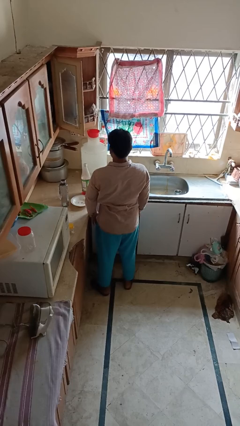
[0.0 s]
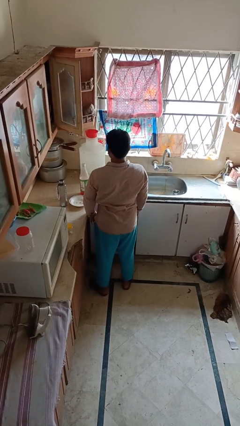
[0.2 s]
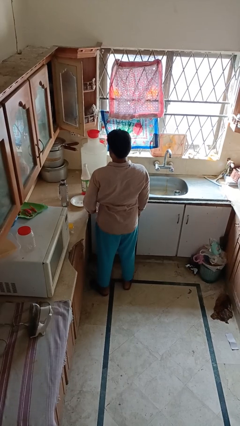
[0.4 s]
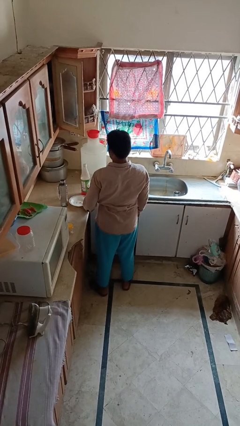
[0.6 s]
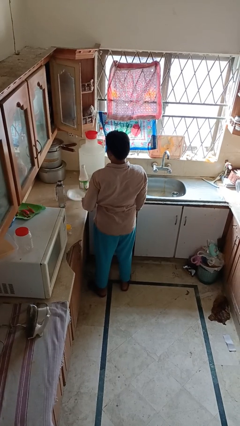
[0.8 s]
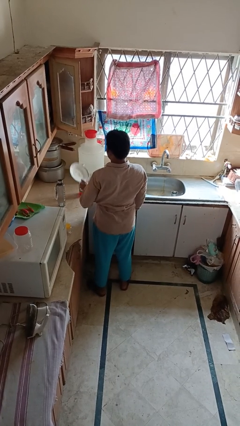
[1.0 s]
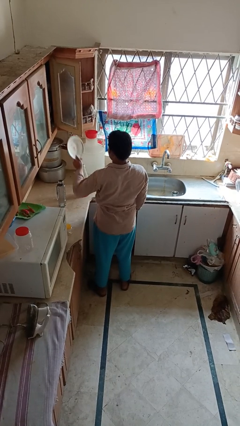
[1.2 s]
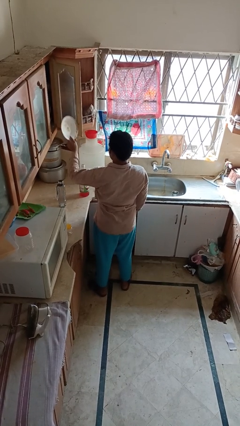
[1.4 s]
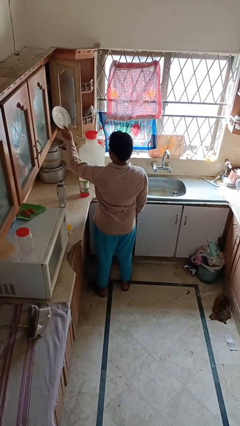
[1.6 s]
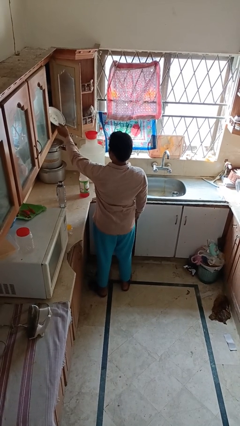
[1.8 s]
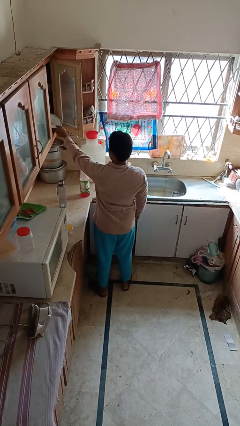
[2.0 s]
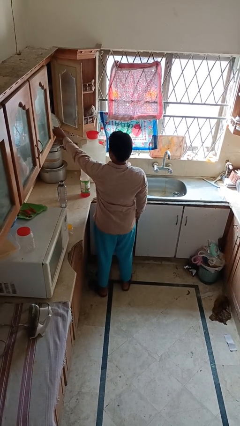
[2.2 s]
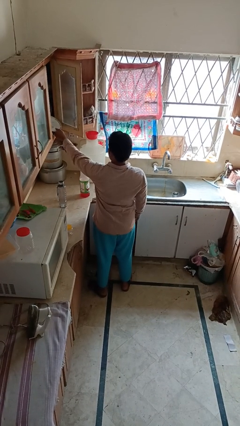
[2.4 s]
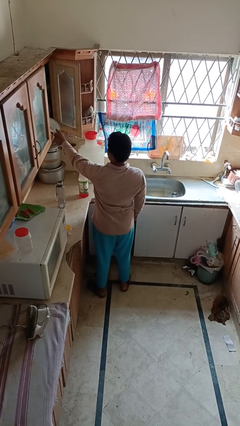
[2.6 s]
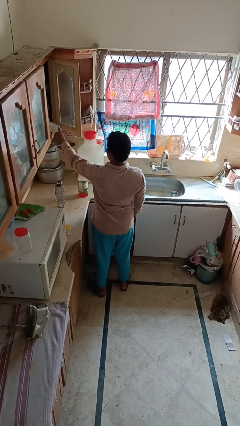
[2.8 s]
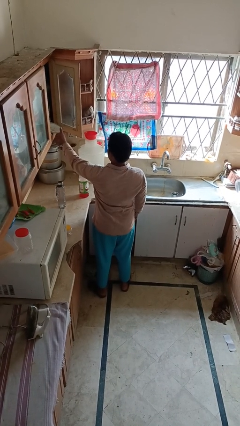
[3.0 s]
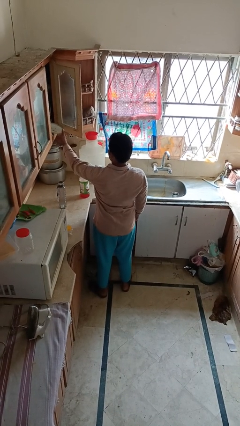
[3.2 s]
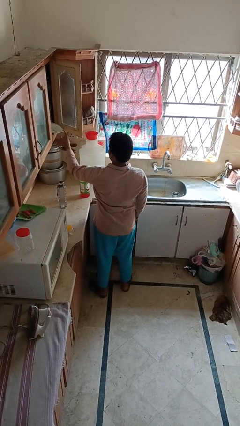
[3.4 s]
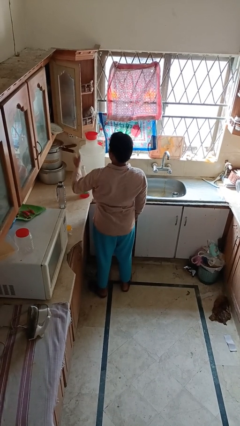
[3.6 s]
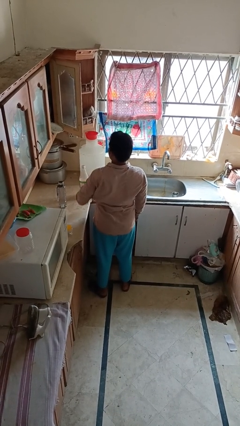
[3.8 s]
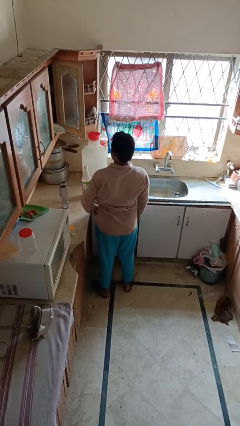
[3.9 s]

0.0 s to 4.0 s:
person puts object in cabinet

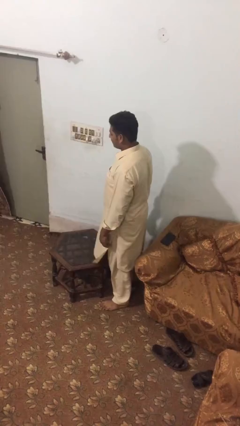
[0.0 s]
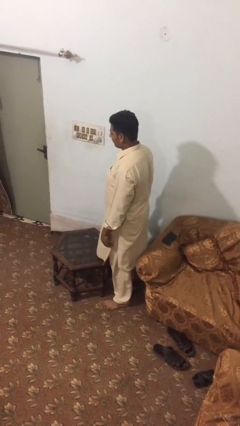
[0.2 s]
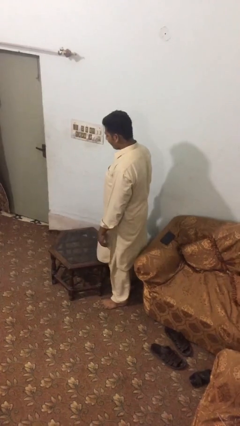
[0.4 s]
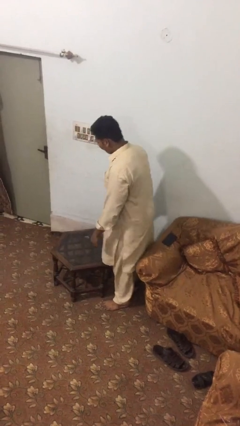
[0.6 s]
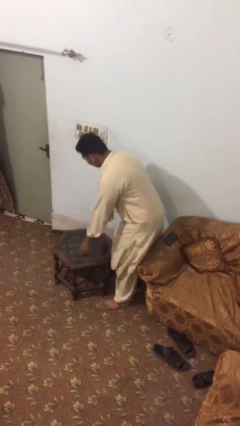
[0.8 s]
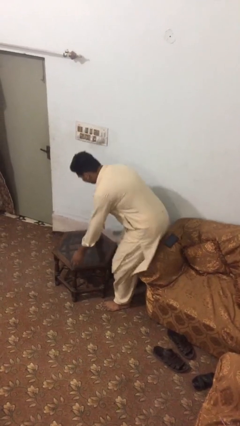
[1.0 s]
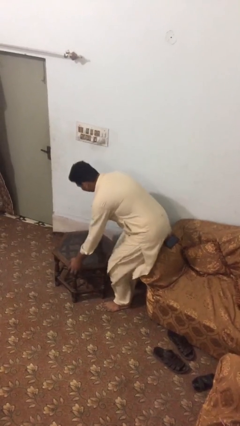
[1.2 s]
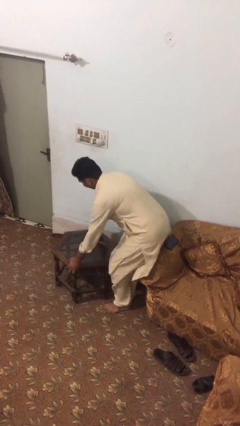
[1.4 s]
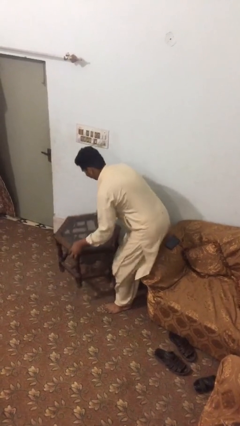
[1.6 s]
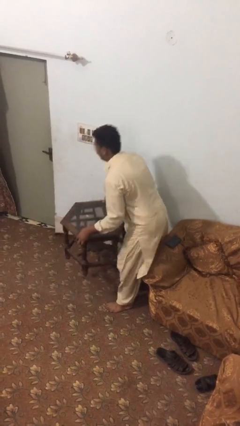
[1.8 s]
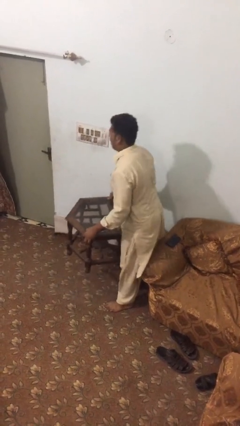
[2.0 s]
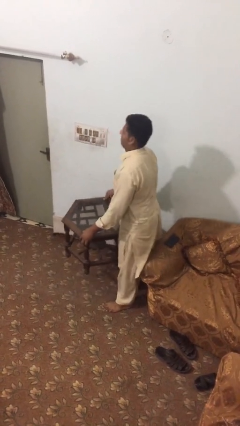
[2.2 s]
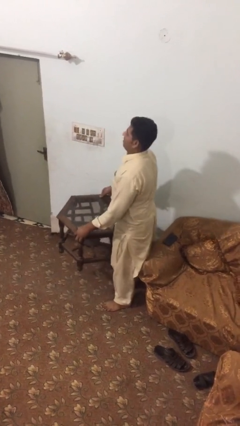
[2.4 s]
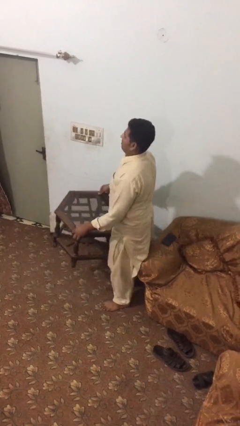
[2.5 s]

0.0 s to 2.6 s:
person picks up object from floor

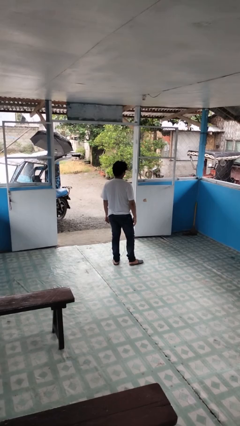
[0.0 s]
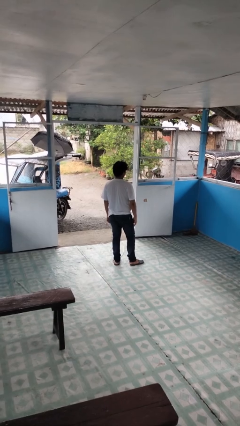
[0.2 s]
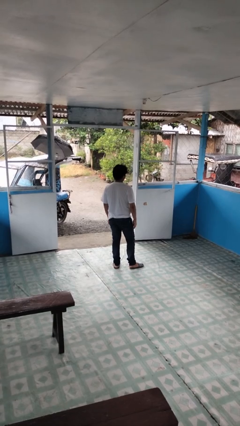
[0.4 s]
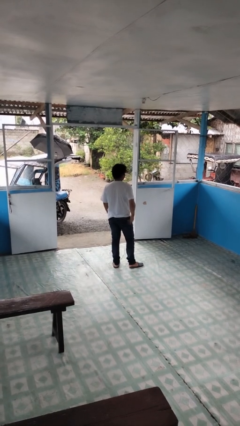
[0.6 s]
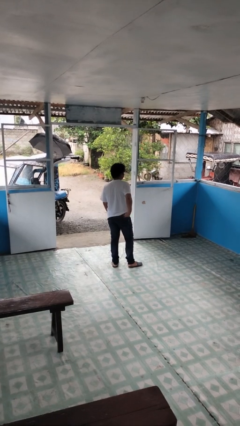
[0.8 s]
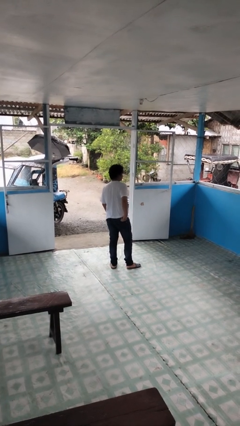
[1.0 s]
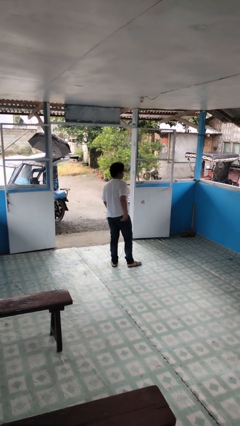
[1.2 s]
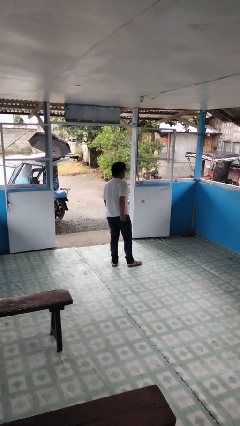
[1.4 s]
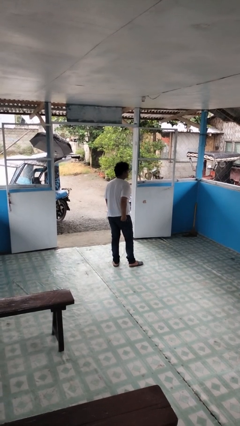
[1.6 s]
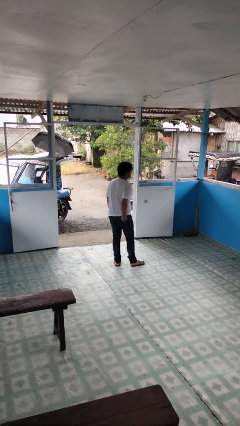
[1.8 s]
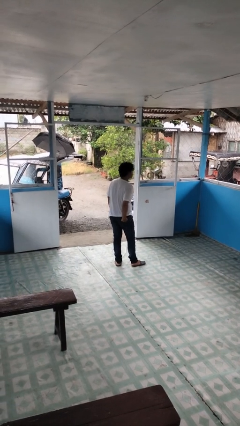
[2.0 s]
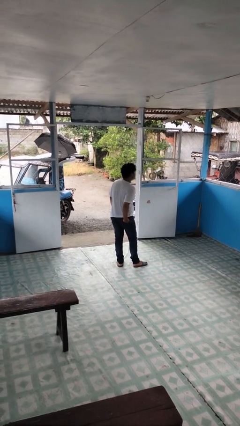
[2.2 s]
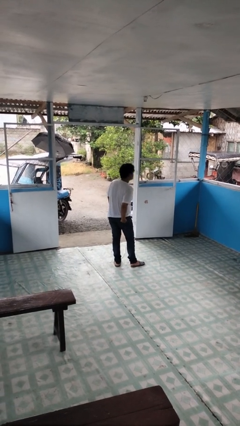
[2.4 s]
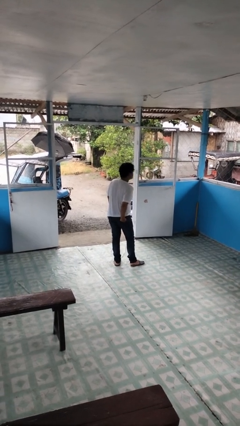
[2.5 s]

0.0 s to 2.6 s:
person puts hands in back pockets

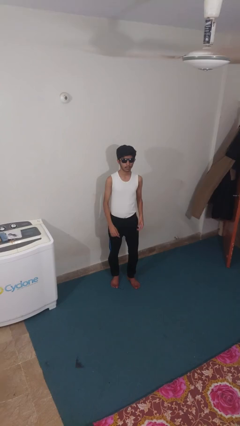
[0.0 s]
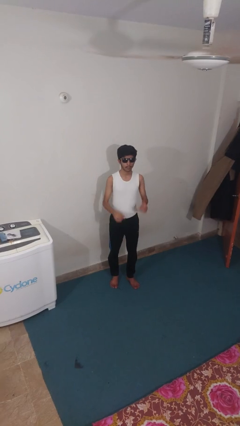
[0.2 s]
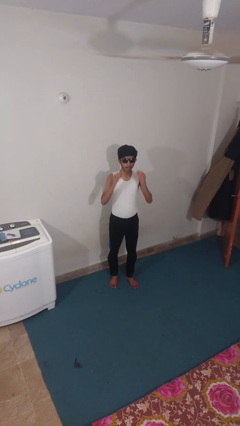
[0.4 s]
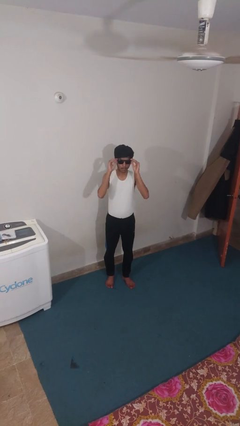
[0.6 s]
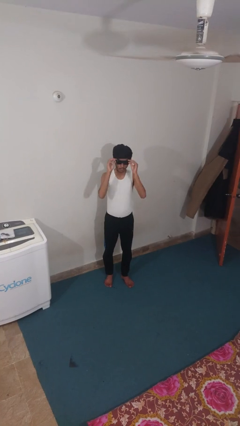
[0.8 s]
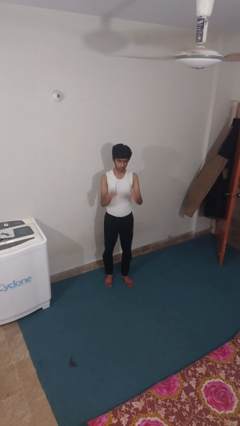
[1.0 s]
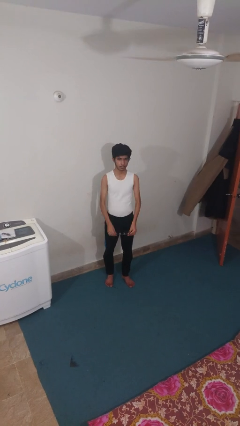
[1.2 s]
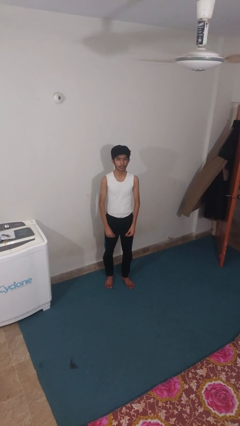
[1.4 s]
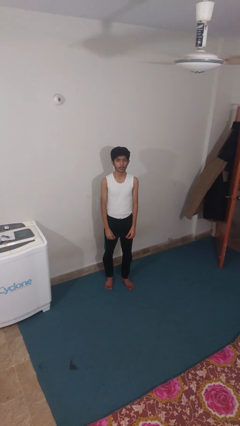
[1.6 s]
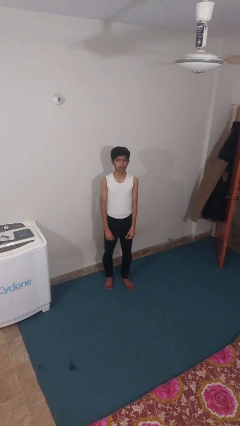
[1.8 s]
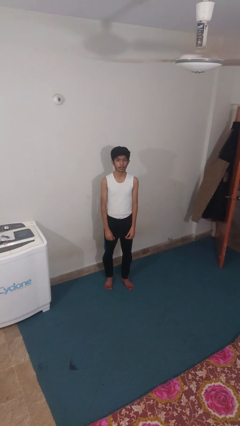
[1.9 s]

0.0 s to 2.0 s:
person takes off sunglasses

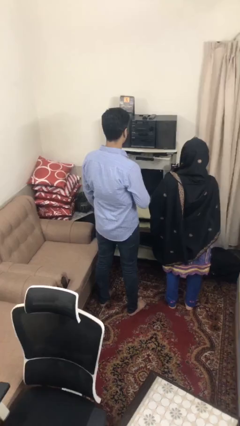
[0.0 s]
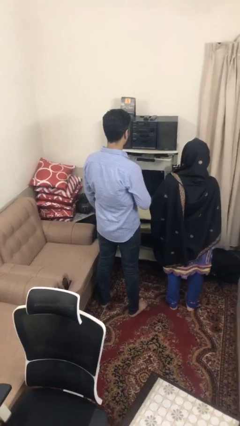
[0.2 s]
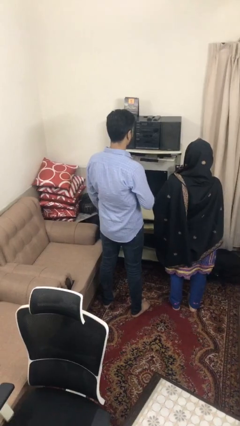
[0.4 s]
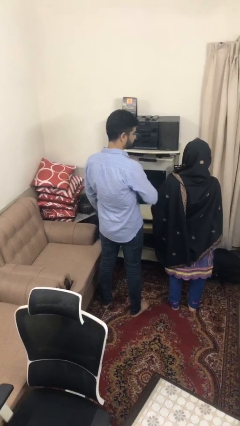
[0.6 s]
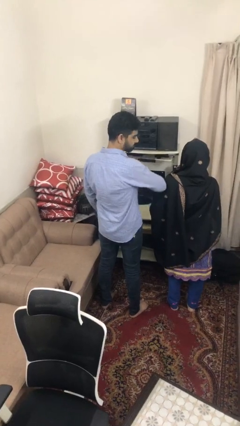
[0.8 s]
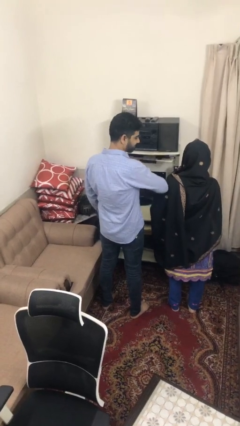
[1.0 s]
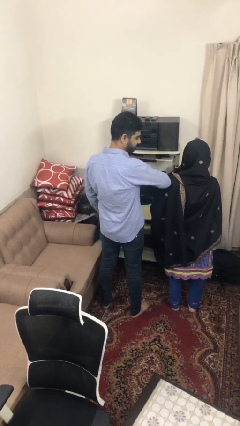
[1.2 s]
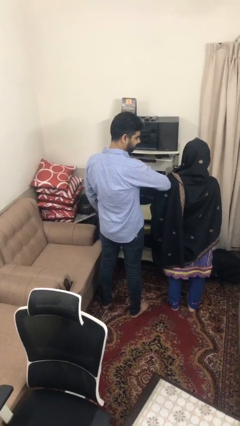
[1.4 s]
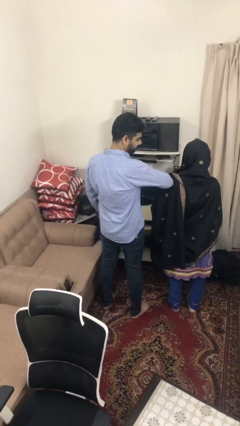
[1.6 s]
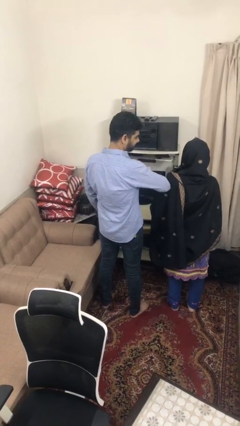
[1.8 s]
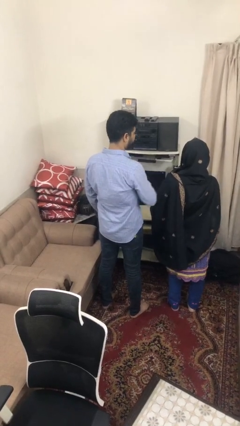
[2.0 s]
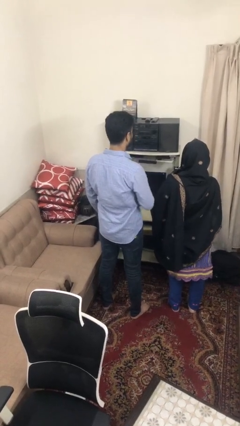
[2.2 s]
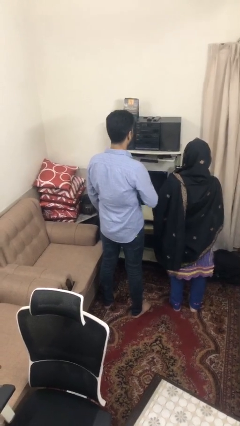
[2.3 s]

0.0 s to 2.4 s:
person nudges person with elbow

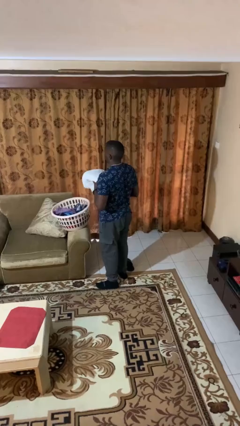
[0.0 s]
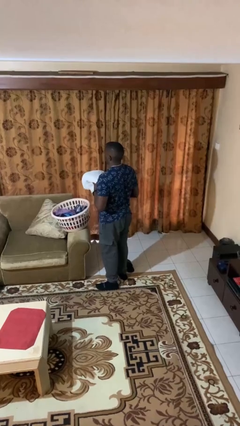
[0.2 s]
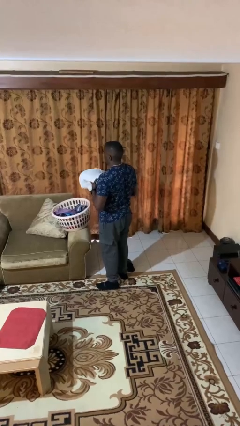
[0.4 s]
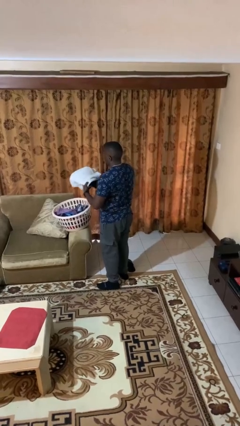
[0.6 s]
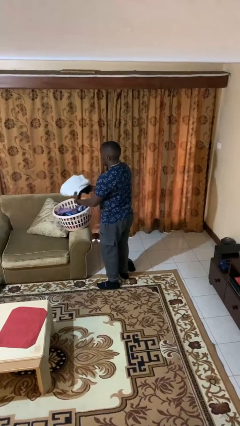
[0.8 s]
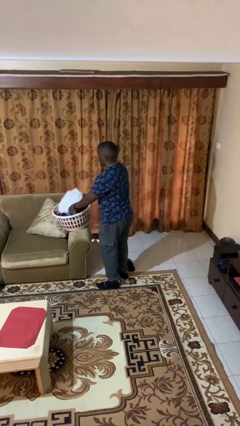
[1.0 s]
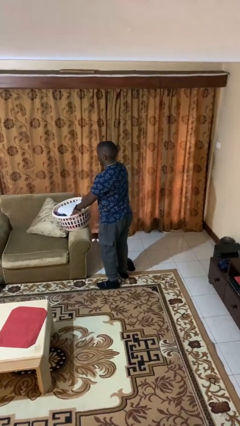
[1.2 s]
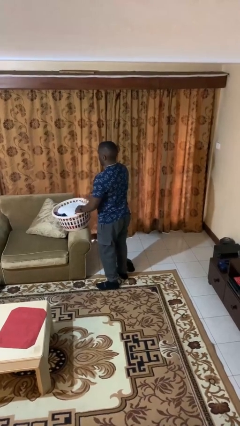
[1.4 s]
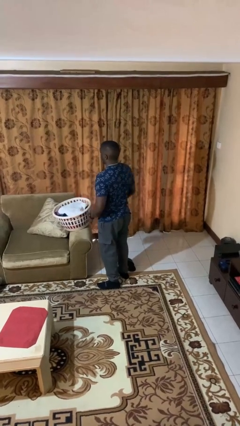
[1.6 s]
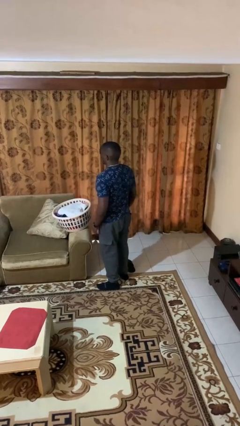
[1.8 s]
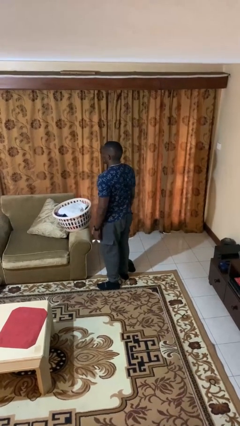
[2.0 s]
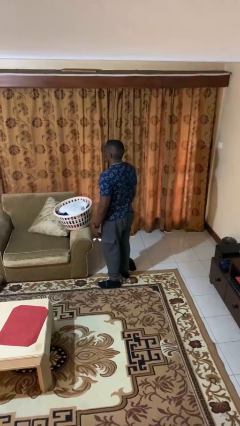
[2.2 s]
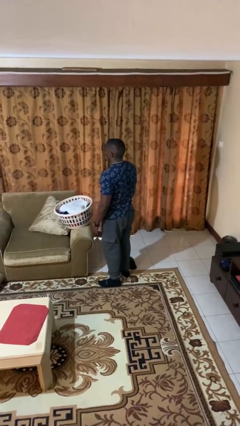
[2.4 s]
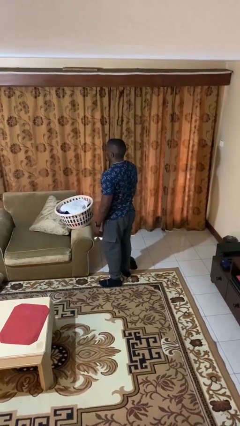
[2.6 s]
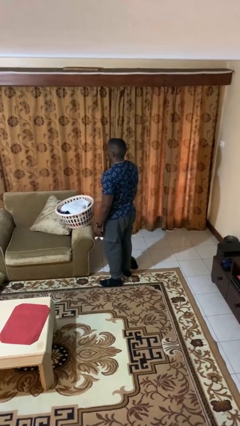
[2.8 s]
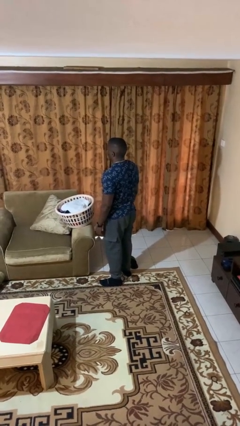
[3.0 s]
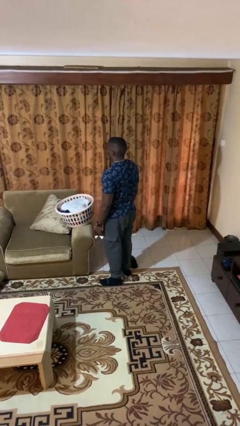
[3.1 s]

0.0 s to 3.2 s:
person puts object into basket

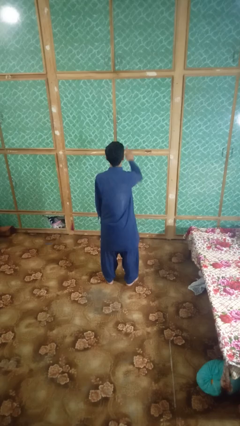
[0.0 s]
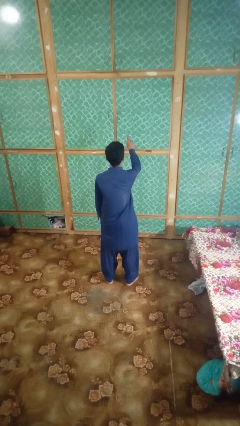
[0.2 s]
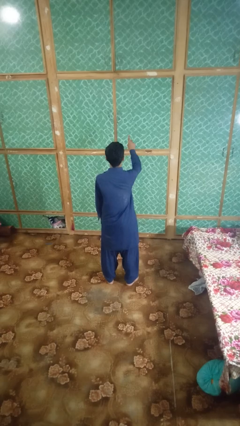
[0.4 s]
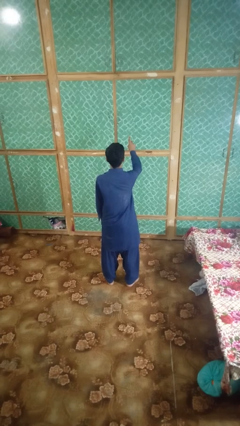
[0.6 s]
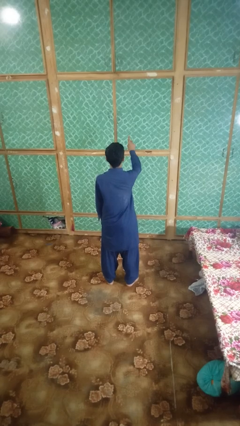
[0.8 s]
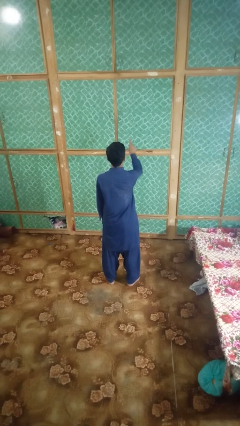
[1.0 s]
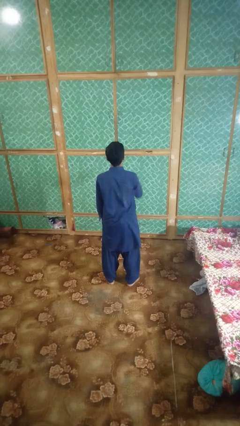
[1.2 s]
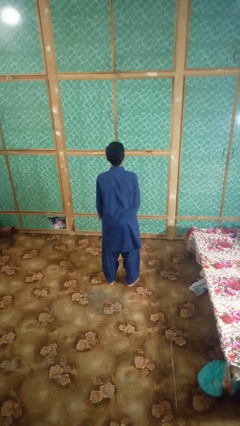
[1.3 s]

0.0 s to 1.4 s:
person gestures number one
